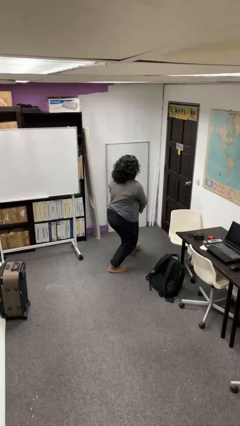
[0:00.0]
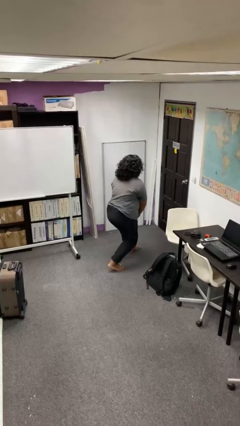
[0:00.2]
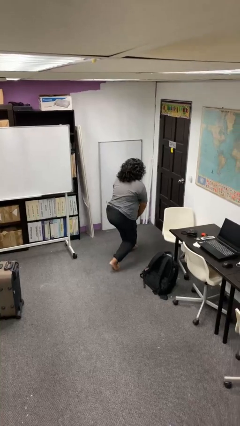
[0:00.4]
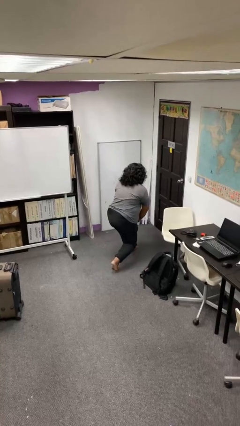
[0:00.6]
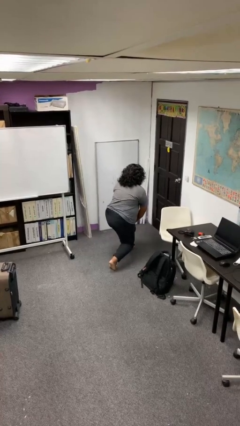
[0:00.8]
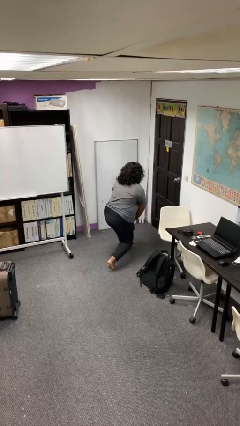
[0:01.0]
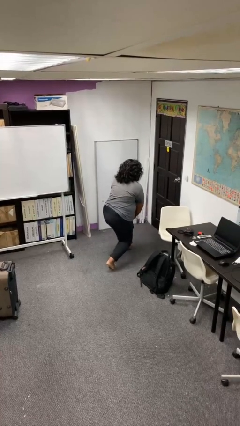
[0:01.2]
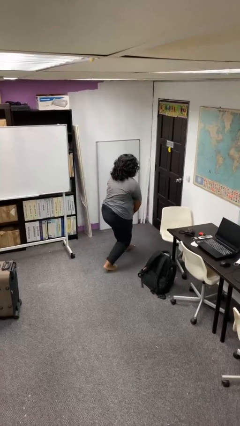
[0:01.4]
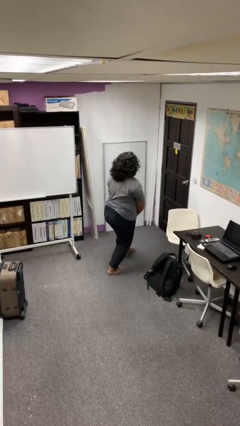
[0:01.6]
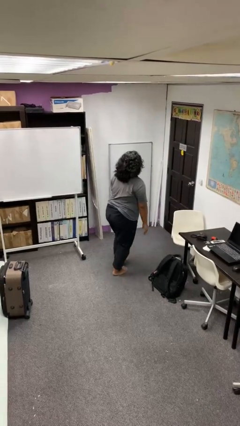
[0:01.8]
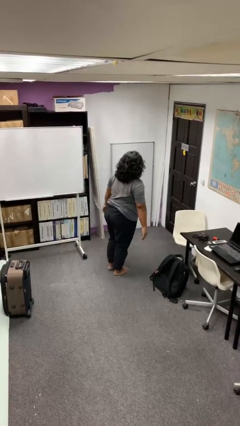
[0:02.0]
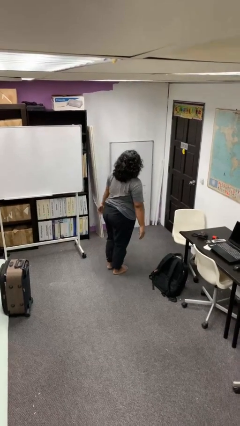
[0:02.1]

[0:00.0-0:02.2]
person exercises with lunges

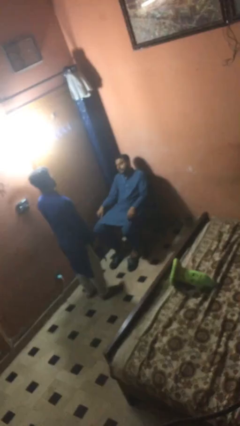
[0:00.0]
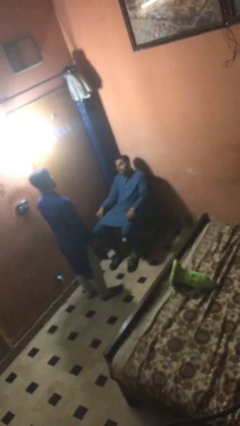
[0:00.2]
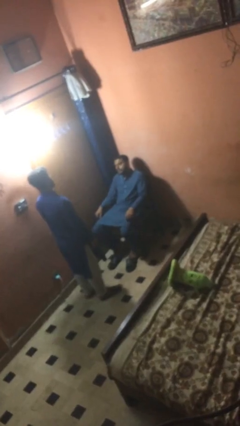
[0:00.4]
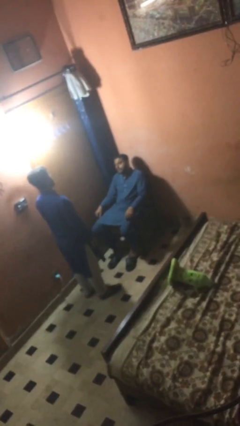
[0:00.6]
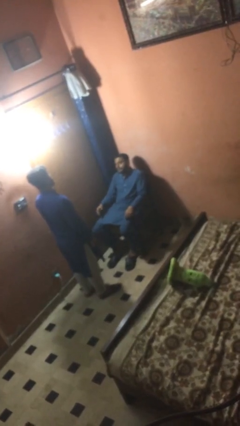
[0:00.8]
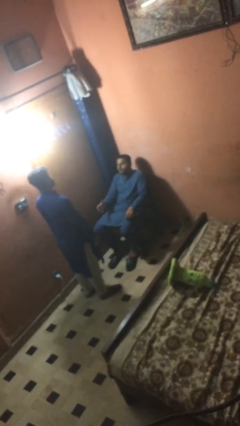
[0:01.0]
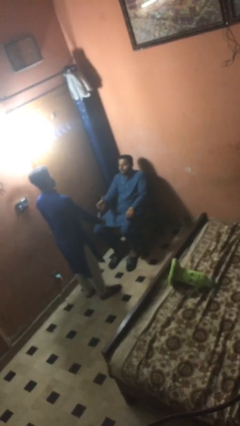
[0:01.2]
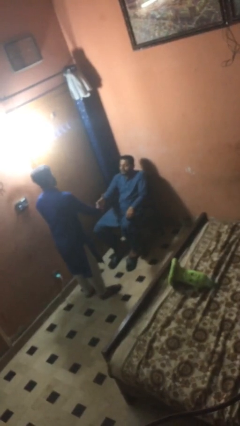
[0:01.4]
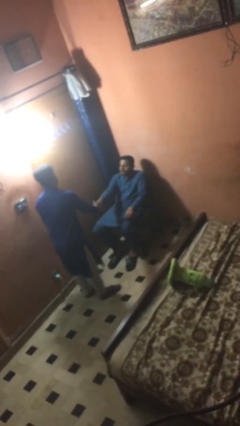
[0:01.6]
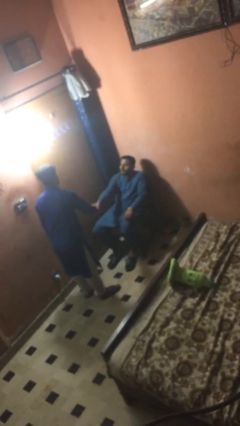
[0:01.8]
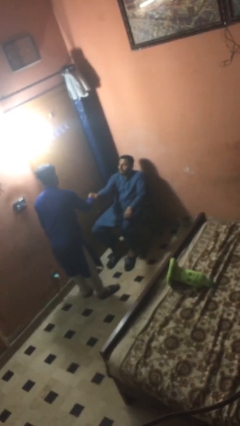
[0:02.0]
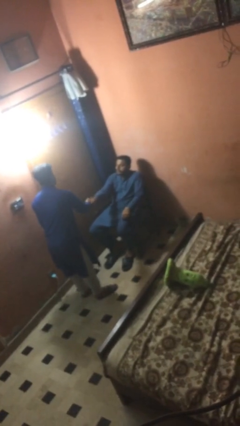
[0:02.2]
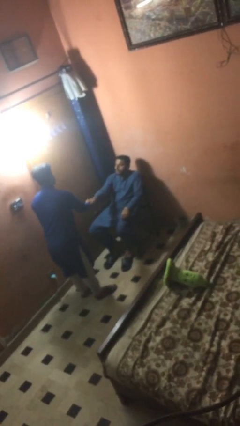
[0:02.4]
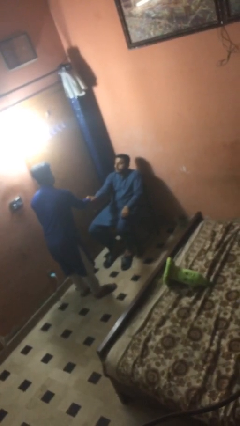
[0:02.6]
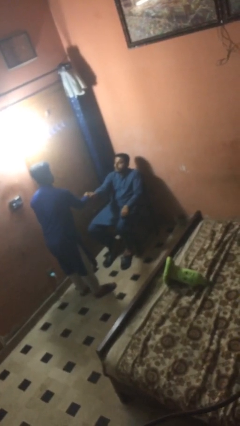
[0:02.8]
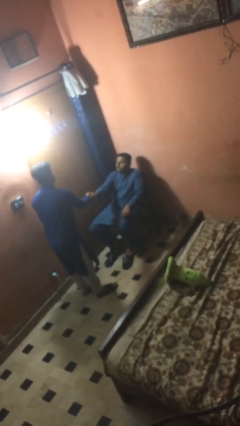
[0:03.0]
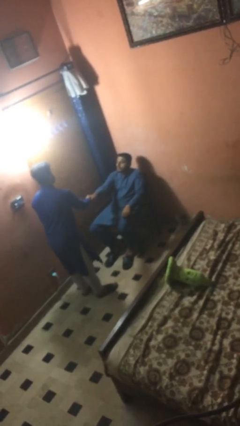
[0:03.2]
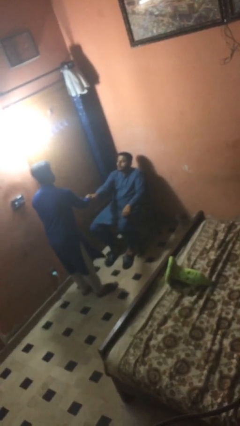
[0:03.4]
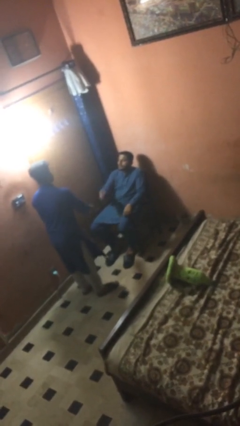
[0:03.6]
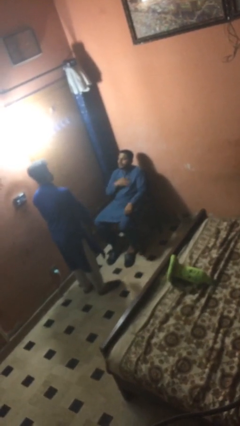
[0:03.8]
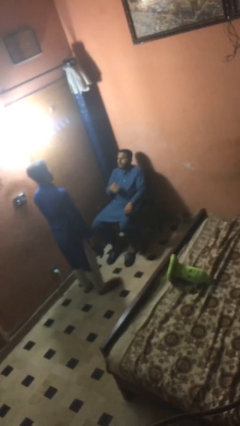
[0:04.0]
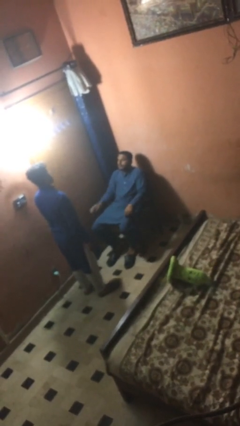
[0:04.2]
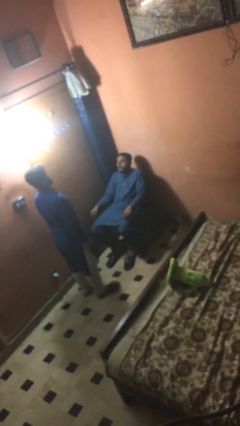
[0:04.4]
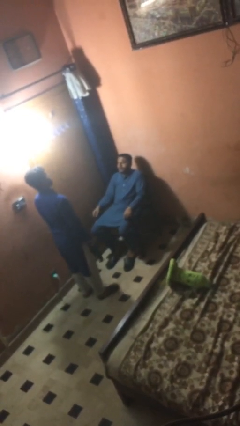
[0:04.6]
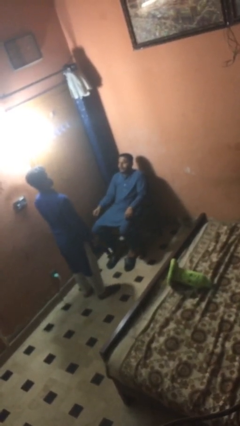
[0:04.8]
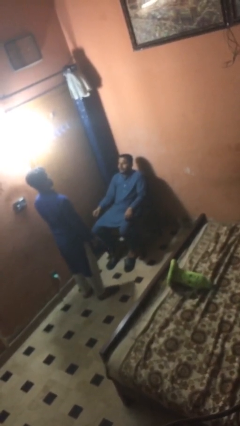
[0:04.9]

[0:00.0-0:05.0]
person shakes hand

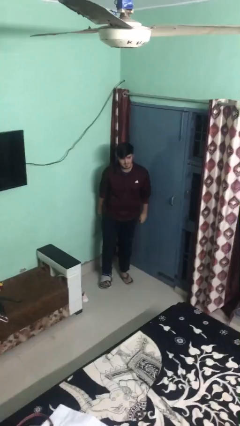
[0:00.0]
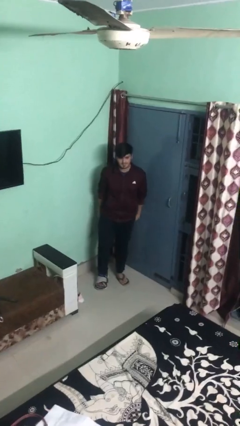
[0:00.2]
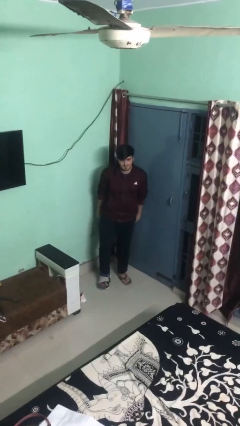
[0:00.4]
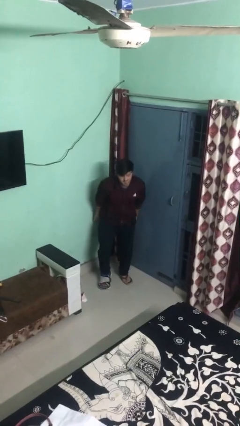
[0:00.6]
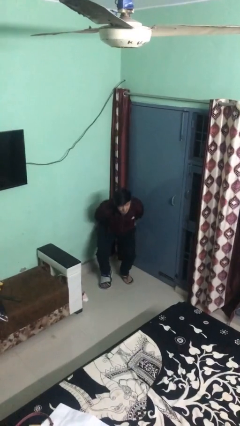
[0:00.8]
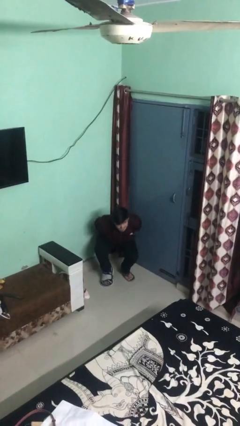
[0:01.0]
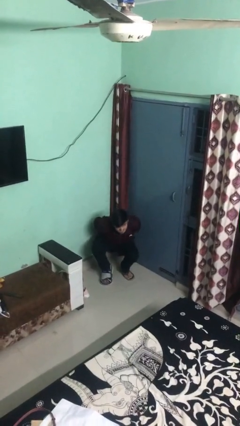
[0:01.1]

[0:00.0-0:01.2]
person sits down

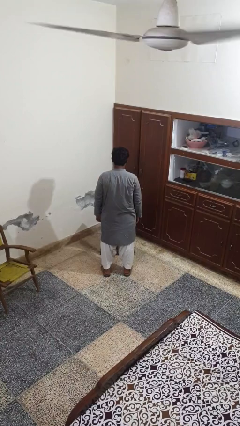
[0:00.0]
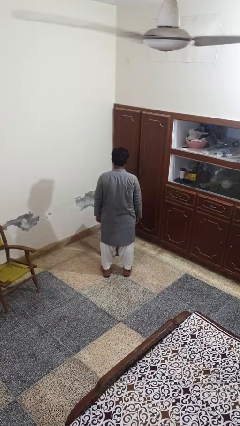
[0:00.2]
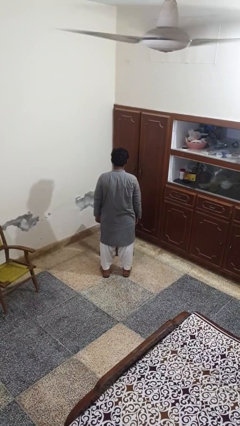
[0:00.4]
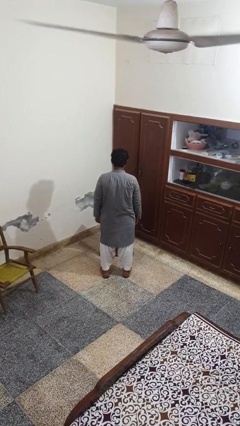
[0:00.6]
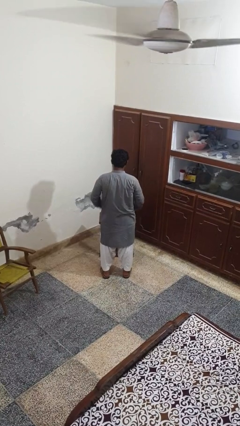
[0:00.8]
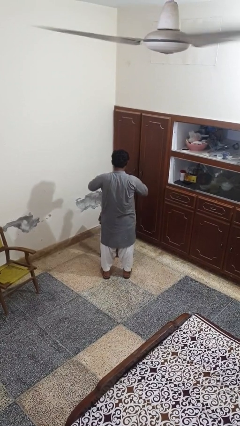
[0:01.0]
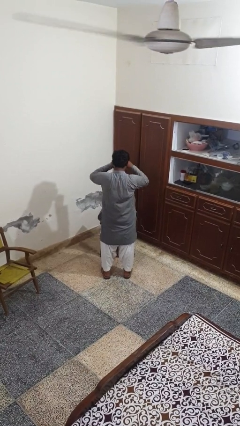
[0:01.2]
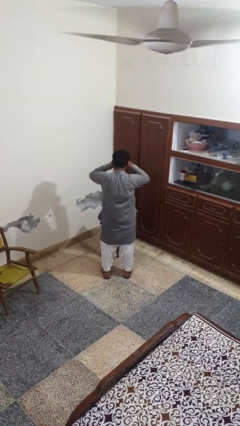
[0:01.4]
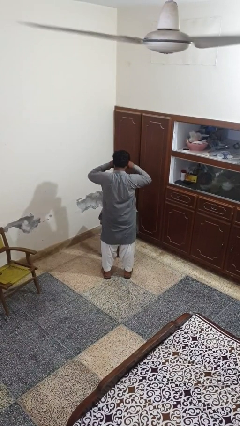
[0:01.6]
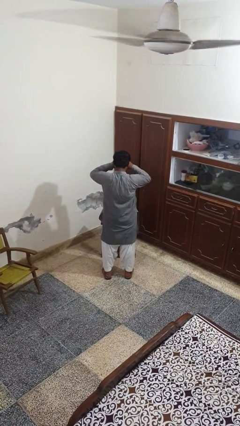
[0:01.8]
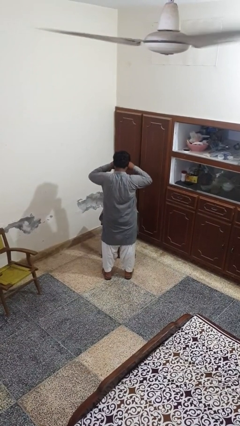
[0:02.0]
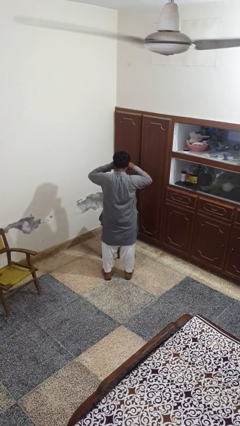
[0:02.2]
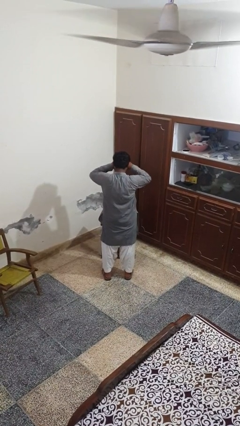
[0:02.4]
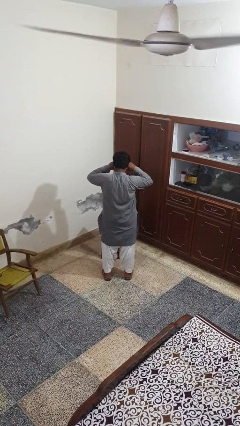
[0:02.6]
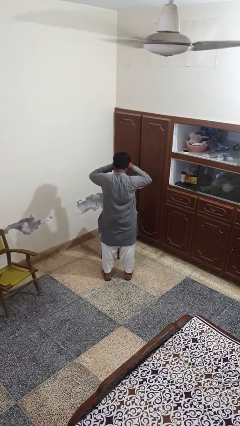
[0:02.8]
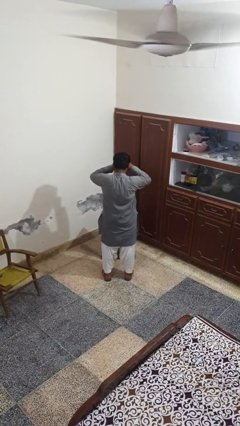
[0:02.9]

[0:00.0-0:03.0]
person rubs eyes

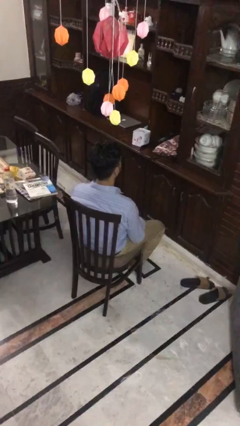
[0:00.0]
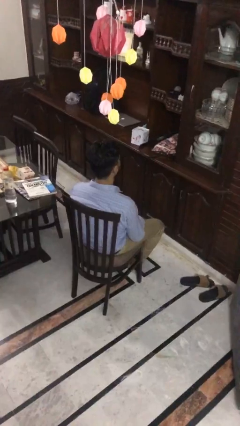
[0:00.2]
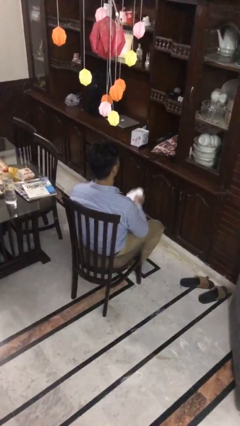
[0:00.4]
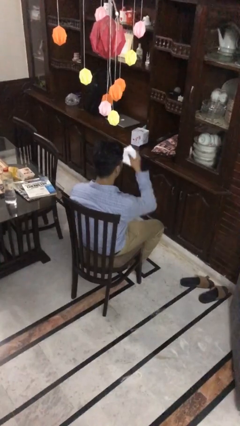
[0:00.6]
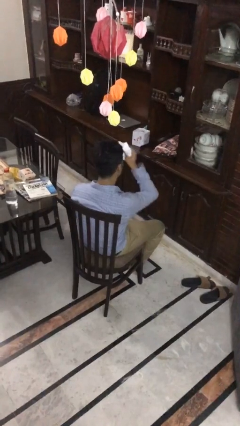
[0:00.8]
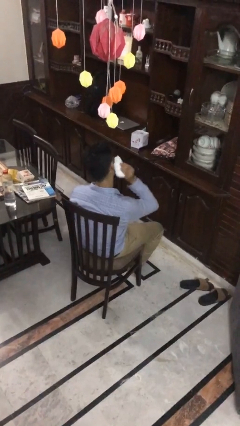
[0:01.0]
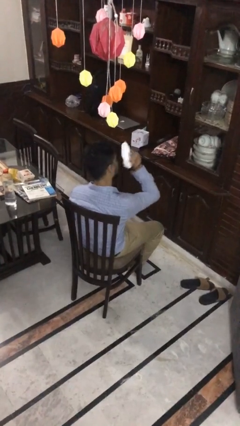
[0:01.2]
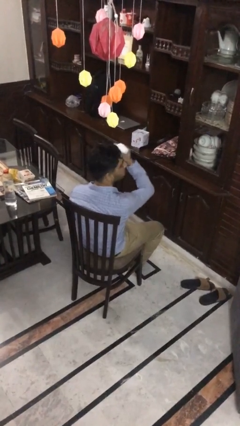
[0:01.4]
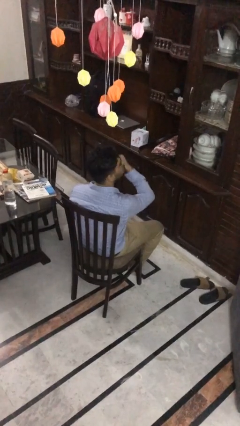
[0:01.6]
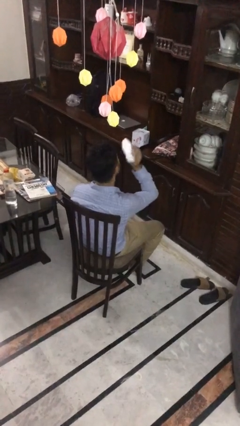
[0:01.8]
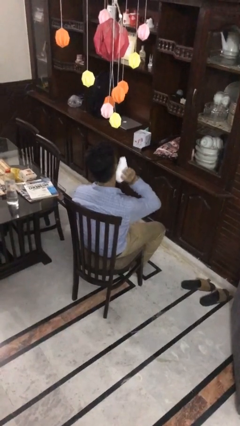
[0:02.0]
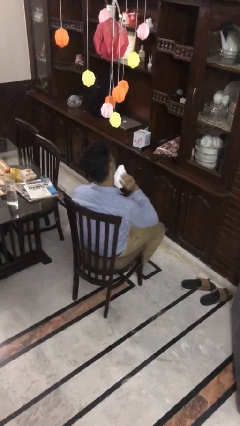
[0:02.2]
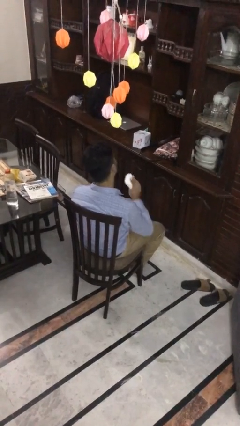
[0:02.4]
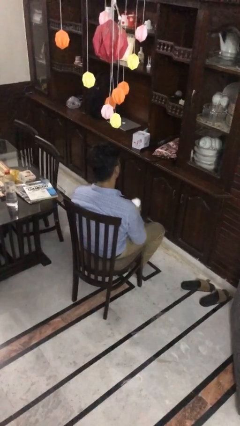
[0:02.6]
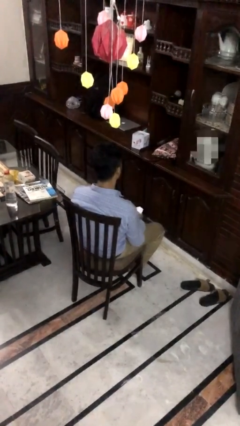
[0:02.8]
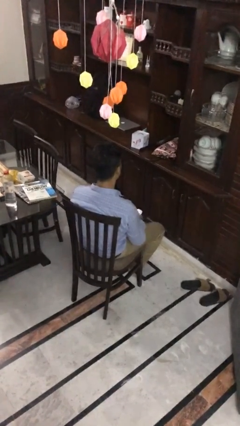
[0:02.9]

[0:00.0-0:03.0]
person wipes mouth with napkin

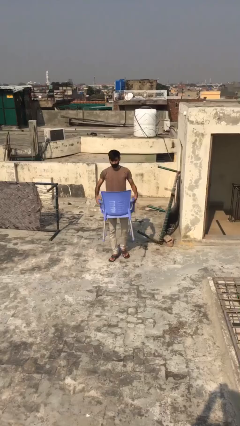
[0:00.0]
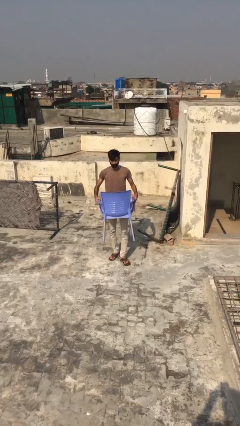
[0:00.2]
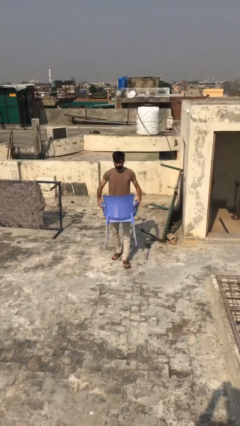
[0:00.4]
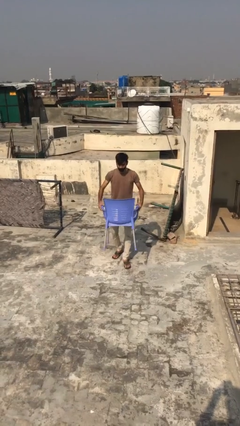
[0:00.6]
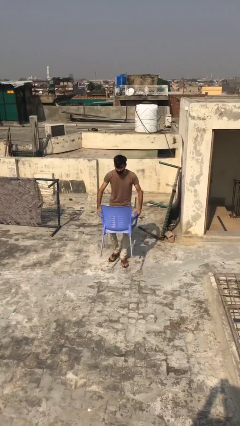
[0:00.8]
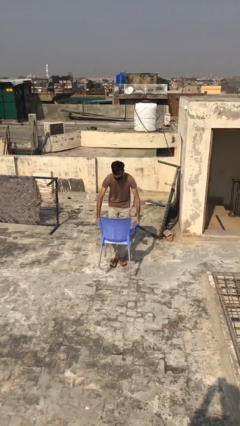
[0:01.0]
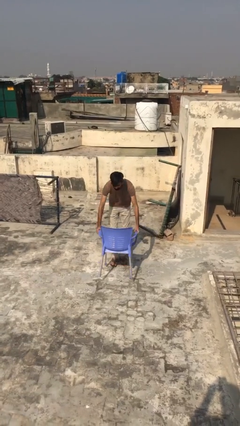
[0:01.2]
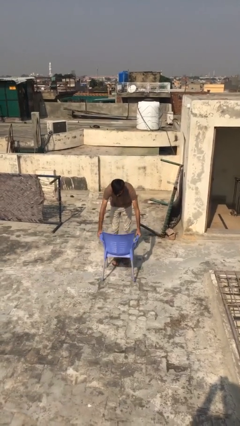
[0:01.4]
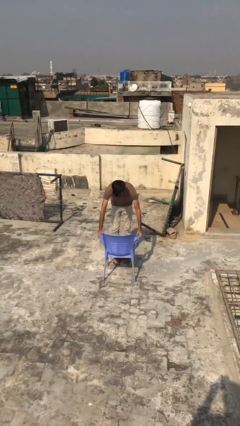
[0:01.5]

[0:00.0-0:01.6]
person puts down object on floor

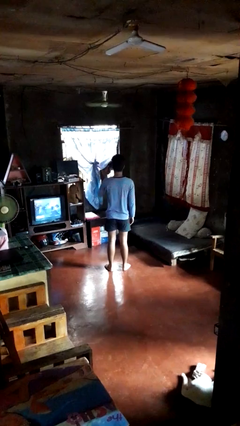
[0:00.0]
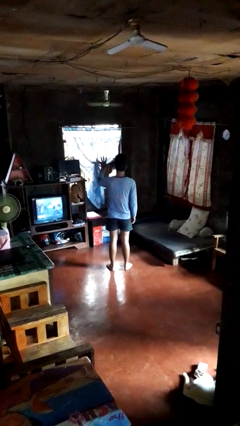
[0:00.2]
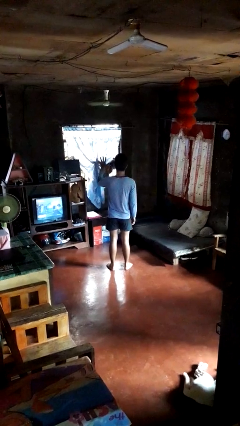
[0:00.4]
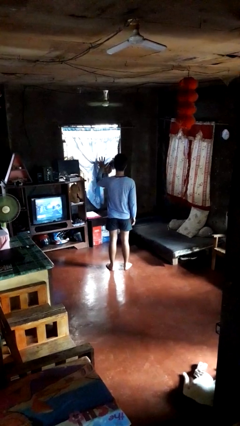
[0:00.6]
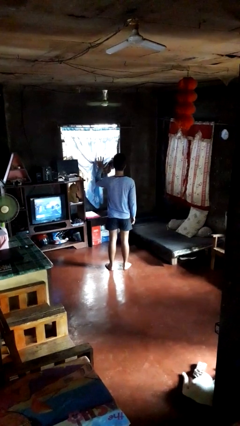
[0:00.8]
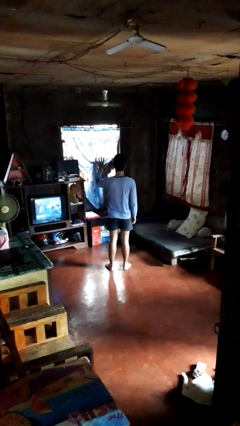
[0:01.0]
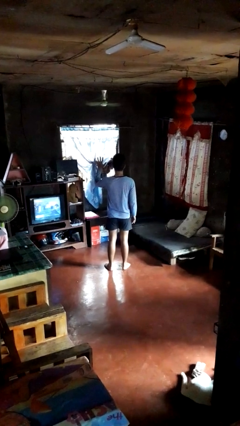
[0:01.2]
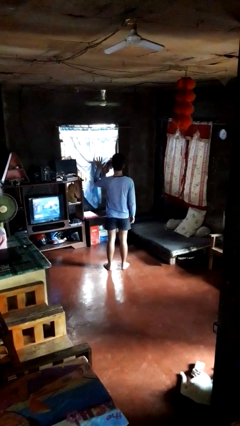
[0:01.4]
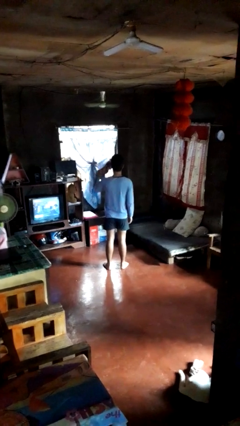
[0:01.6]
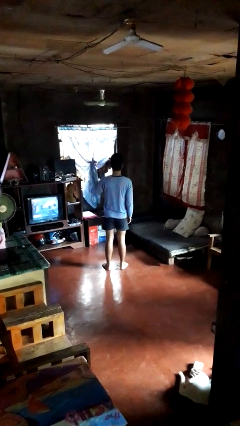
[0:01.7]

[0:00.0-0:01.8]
person gestures number five
